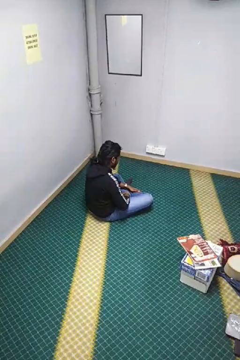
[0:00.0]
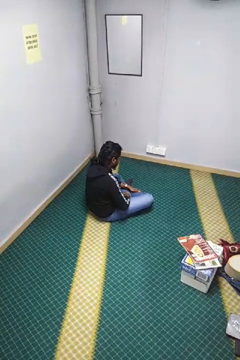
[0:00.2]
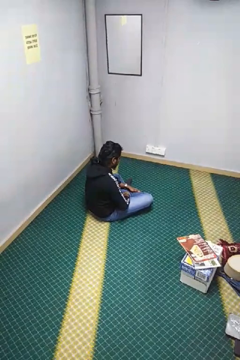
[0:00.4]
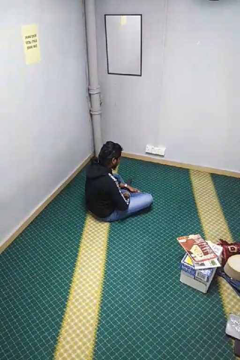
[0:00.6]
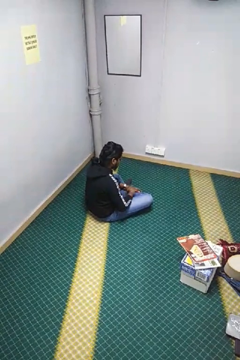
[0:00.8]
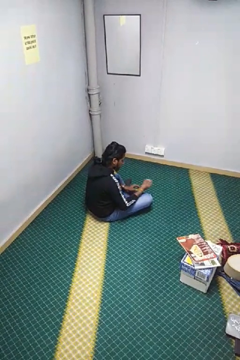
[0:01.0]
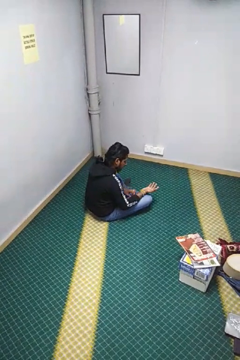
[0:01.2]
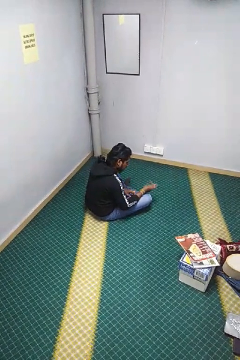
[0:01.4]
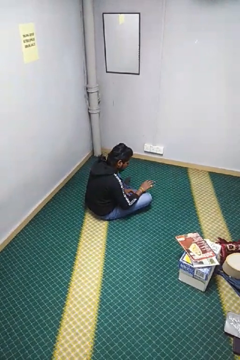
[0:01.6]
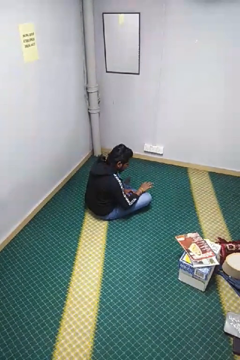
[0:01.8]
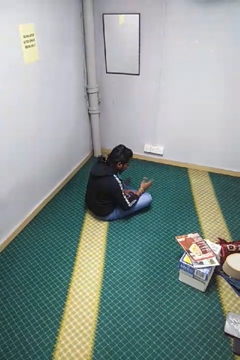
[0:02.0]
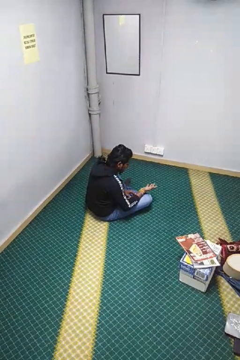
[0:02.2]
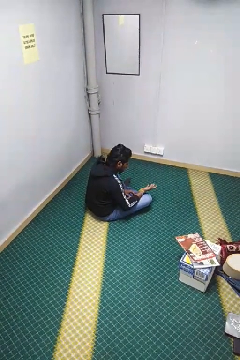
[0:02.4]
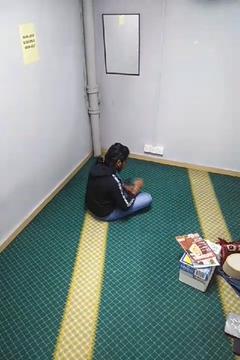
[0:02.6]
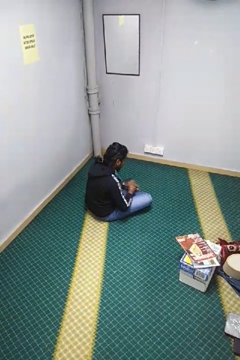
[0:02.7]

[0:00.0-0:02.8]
person looks at hands in lap

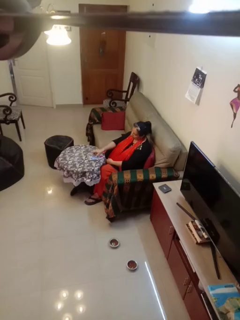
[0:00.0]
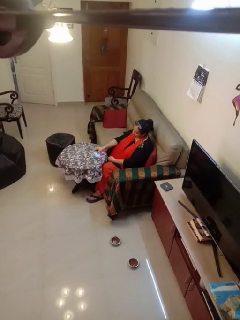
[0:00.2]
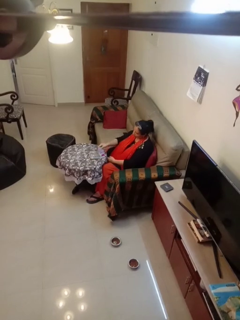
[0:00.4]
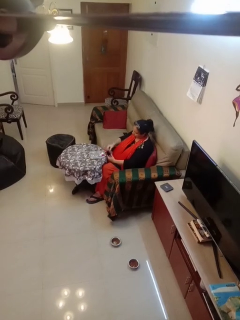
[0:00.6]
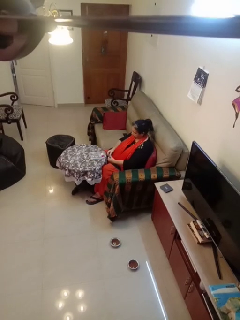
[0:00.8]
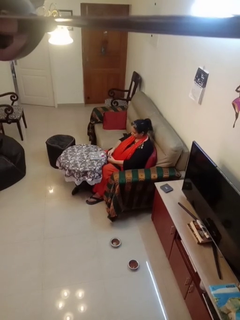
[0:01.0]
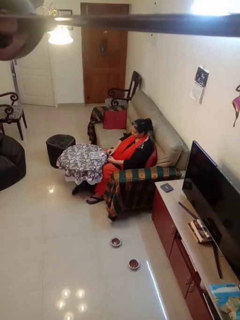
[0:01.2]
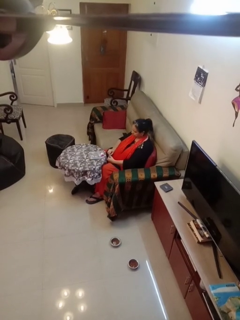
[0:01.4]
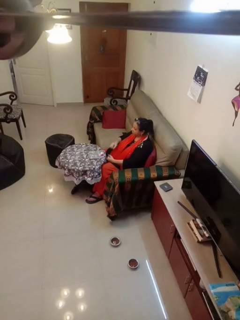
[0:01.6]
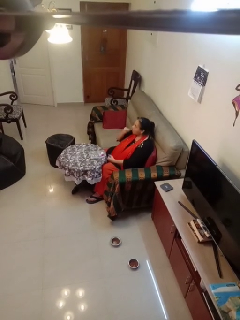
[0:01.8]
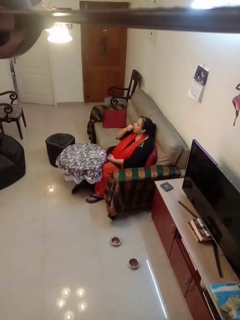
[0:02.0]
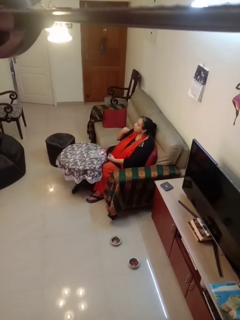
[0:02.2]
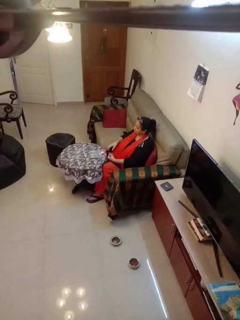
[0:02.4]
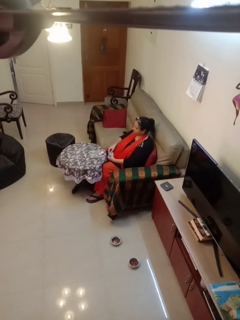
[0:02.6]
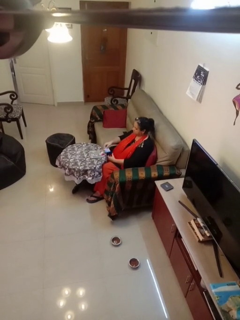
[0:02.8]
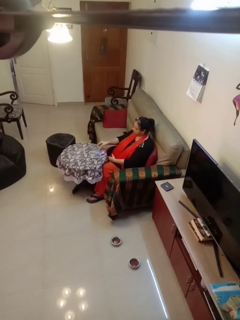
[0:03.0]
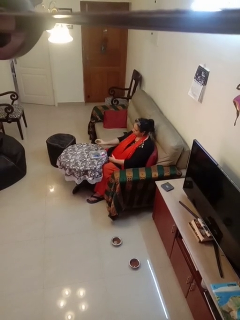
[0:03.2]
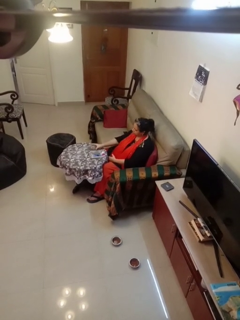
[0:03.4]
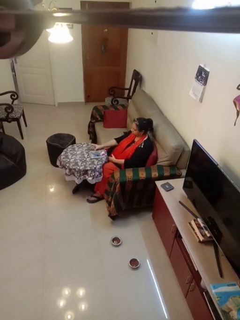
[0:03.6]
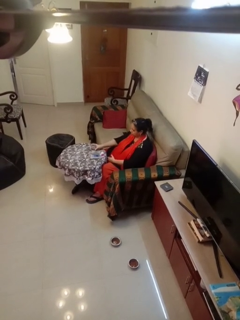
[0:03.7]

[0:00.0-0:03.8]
person takes medicine pills

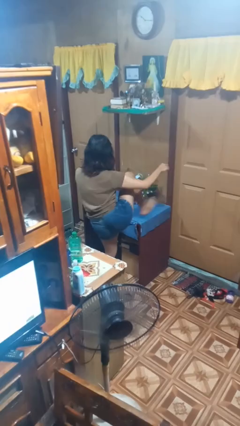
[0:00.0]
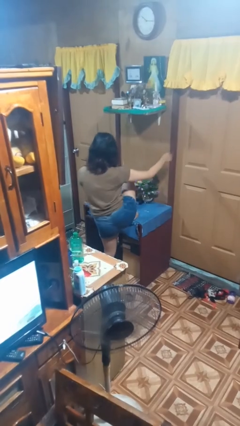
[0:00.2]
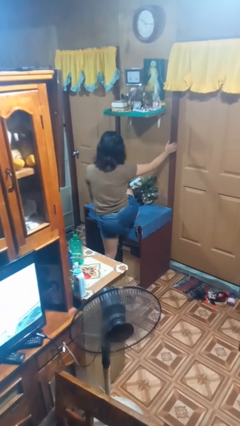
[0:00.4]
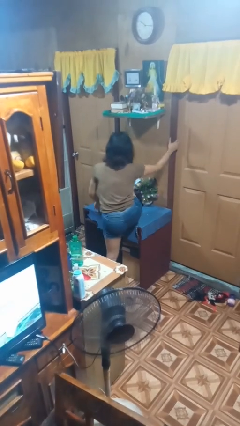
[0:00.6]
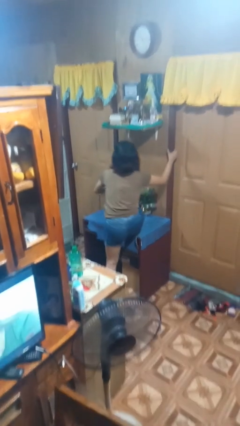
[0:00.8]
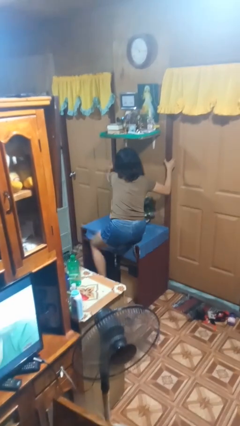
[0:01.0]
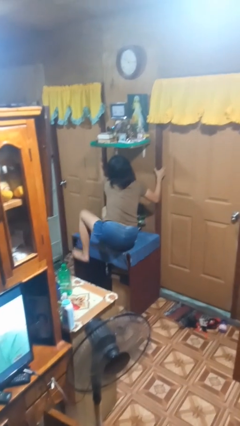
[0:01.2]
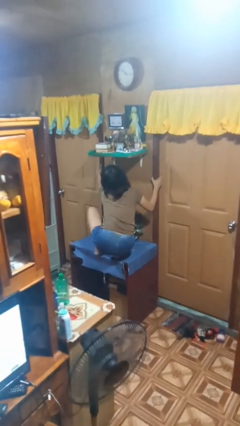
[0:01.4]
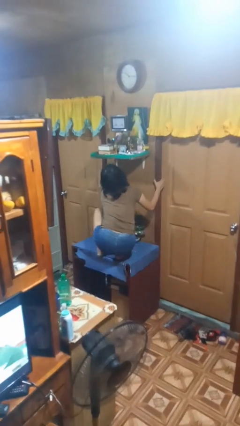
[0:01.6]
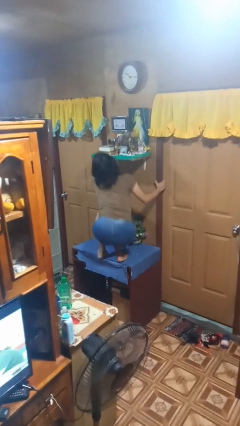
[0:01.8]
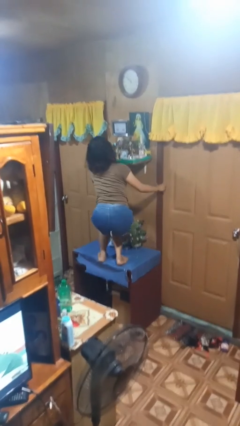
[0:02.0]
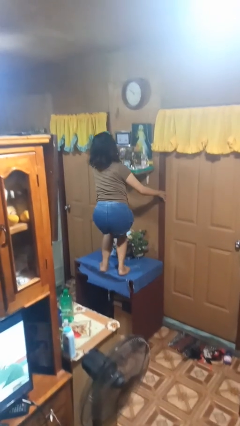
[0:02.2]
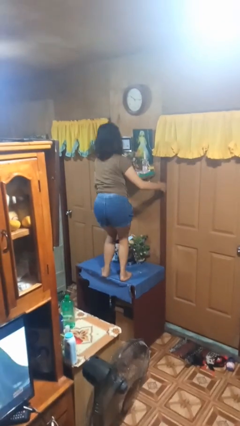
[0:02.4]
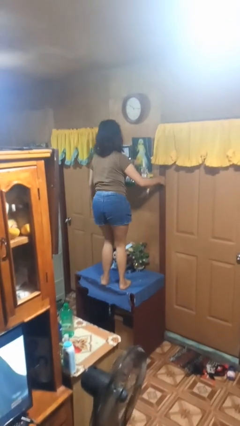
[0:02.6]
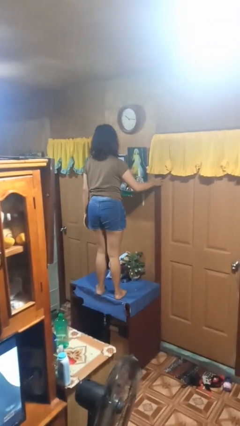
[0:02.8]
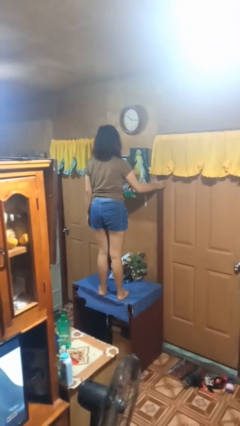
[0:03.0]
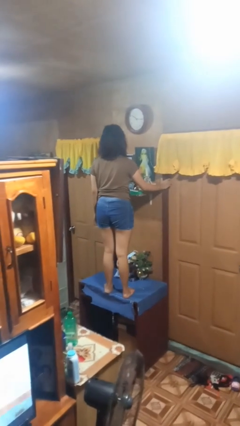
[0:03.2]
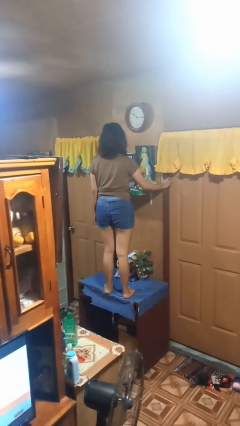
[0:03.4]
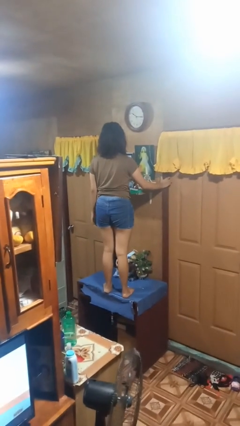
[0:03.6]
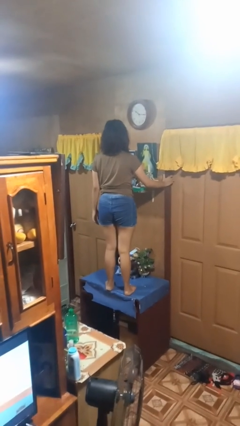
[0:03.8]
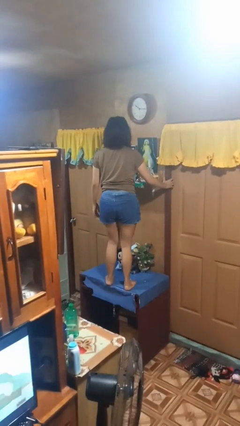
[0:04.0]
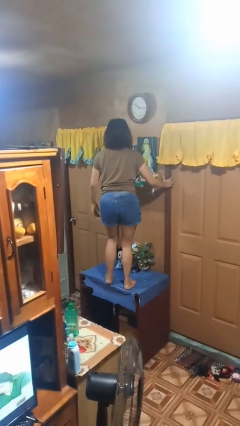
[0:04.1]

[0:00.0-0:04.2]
person climbs on table

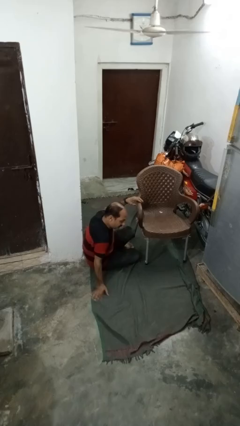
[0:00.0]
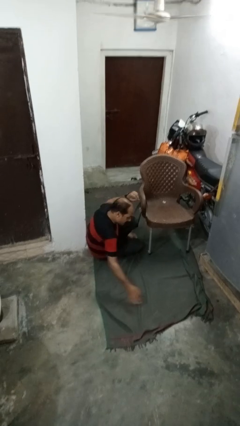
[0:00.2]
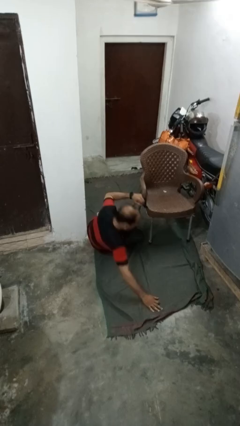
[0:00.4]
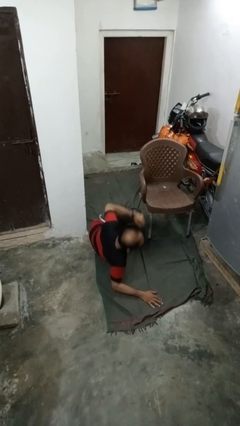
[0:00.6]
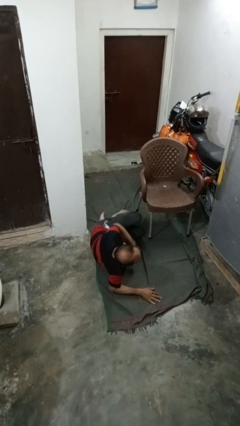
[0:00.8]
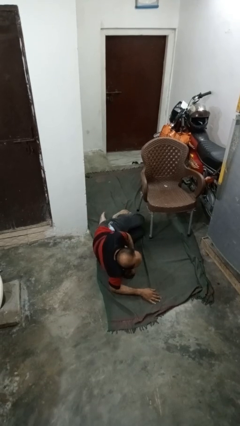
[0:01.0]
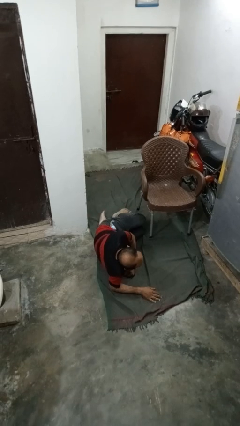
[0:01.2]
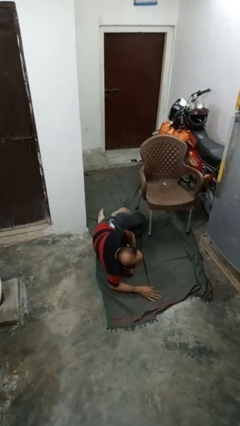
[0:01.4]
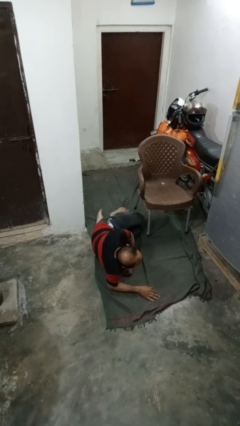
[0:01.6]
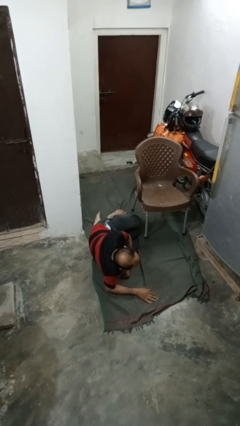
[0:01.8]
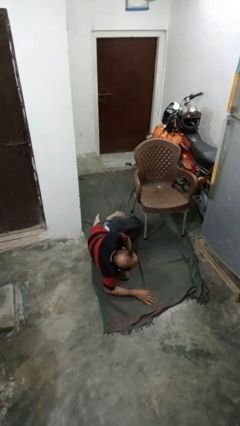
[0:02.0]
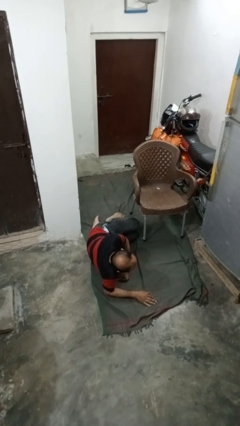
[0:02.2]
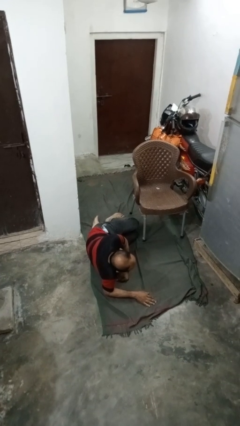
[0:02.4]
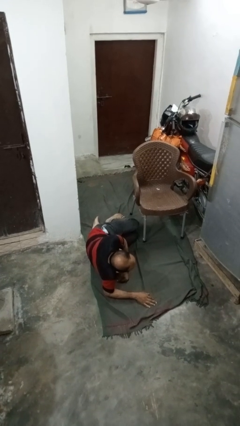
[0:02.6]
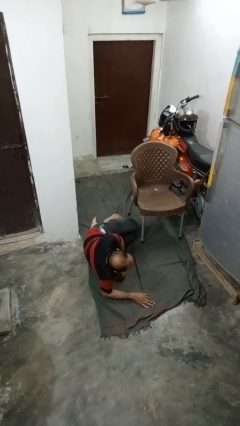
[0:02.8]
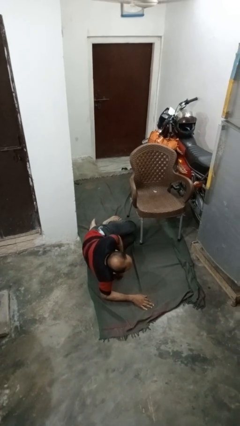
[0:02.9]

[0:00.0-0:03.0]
person lies down on floor

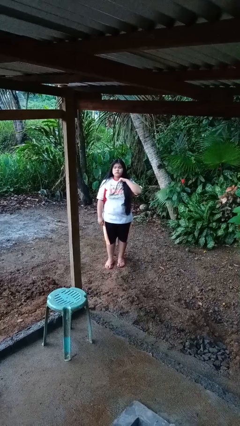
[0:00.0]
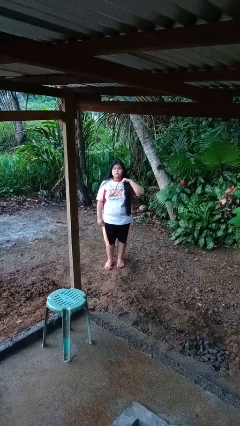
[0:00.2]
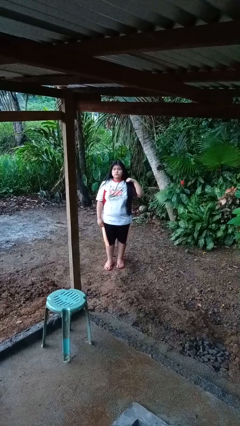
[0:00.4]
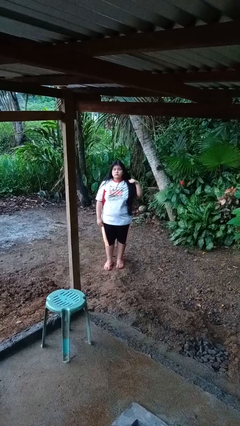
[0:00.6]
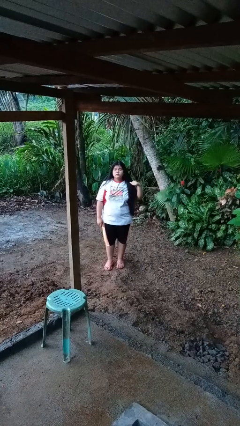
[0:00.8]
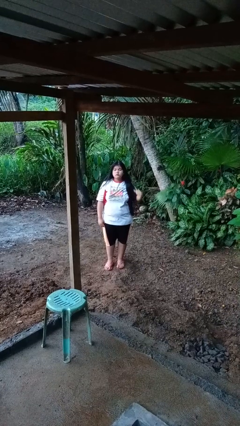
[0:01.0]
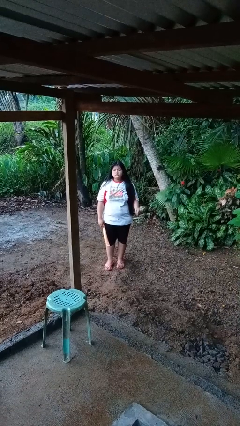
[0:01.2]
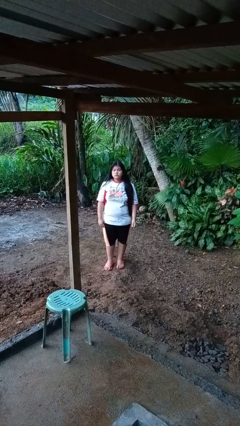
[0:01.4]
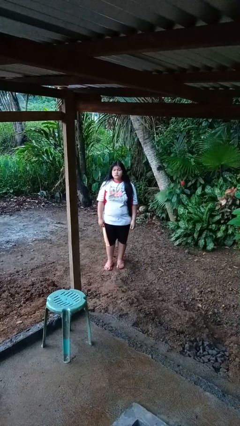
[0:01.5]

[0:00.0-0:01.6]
person gestures cut

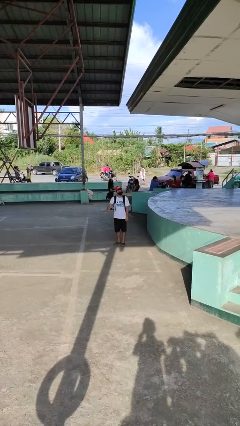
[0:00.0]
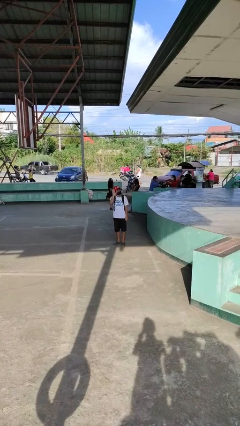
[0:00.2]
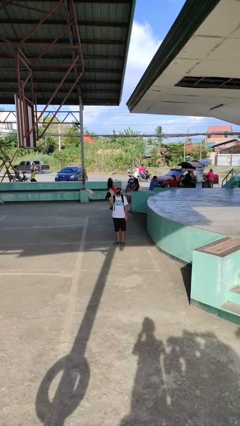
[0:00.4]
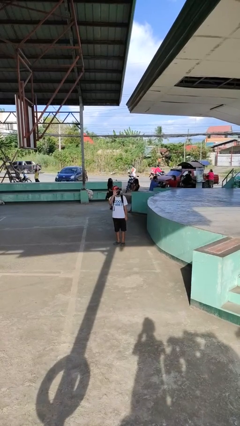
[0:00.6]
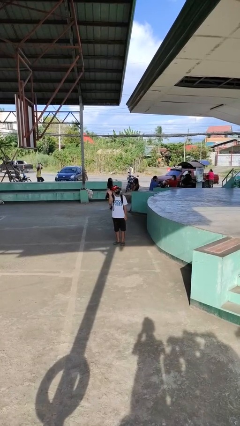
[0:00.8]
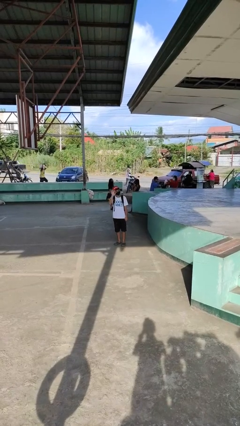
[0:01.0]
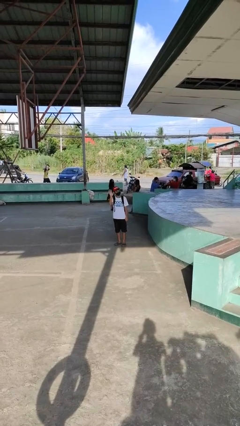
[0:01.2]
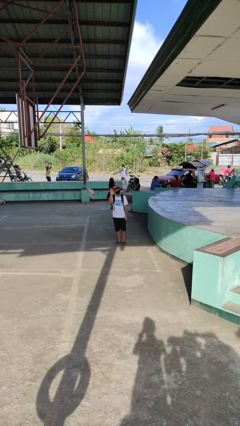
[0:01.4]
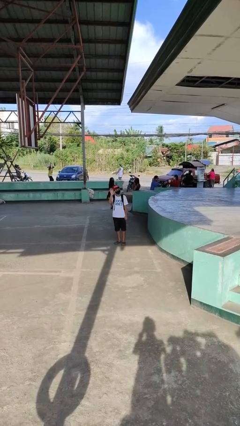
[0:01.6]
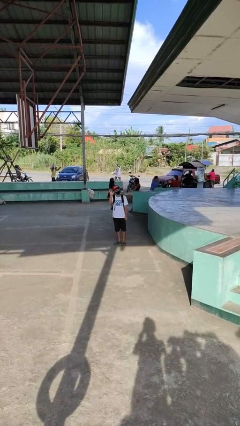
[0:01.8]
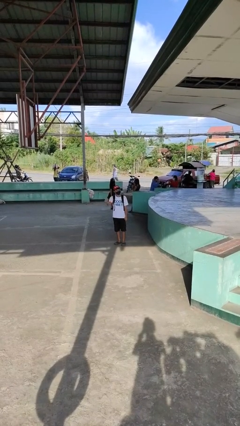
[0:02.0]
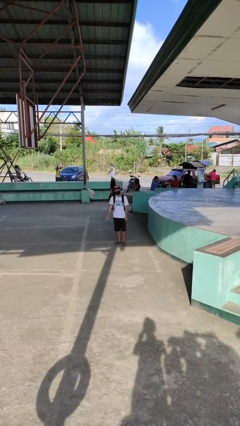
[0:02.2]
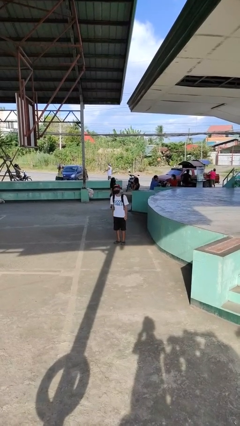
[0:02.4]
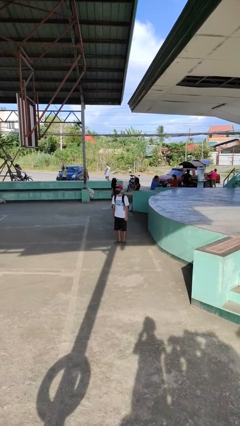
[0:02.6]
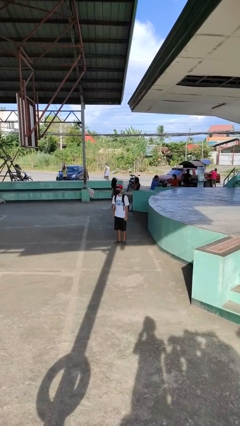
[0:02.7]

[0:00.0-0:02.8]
person waves at person

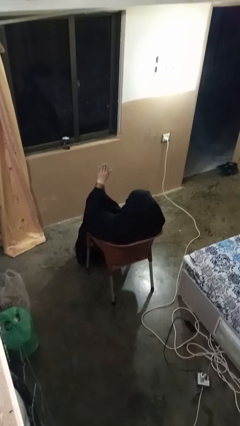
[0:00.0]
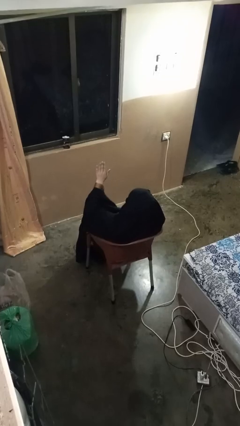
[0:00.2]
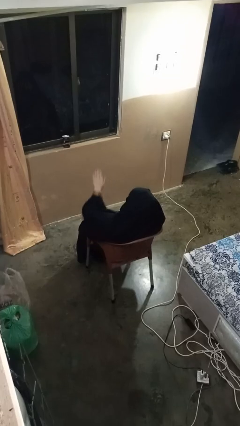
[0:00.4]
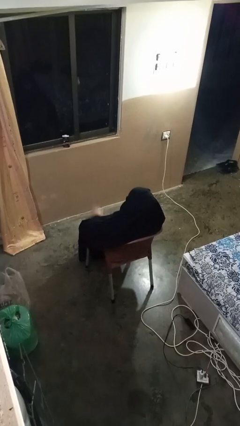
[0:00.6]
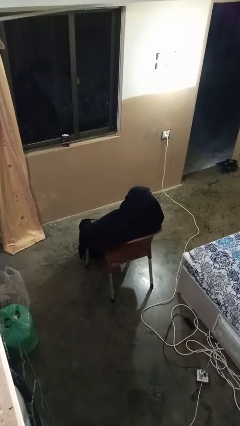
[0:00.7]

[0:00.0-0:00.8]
person gestures lower hand
